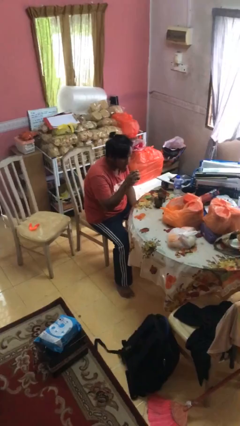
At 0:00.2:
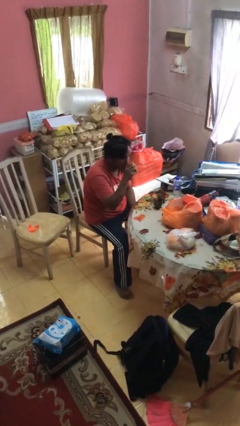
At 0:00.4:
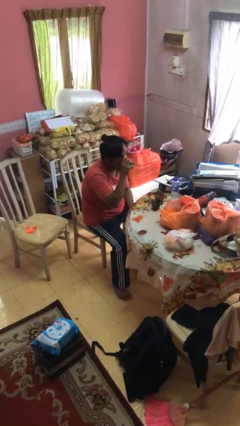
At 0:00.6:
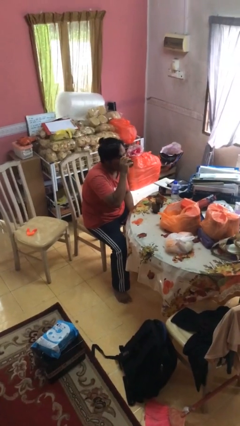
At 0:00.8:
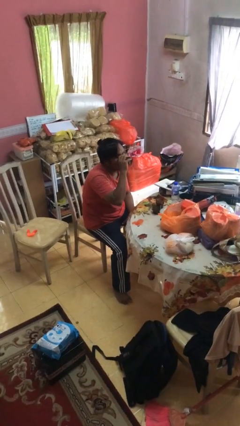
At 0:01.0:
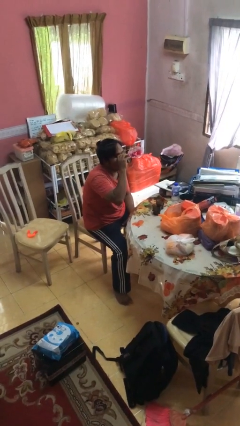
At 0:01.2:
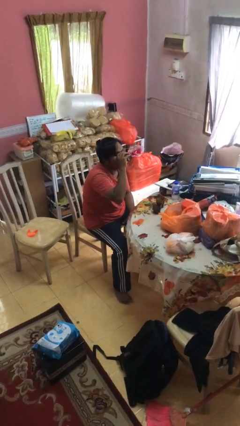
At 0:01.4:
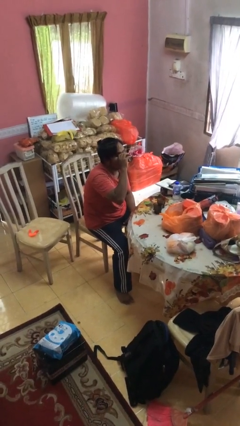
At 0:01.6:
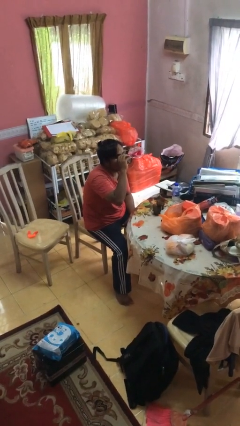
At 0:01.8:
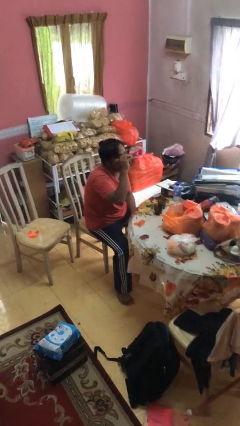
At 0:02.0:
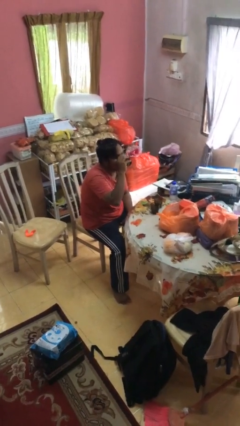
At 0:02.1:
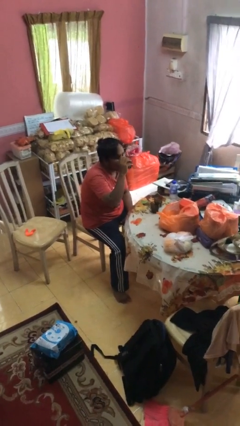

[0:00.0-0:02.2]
person drinks from shotglass

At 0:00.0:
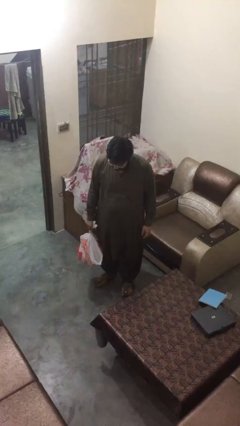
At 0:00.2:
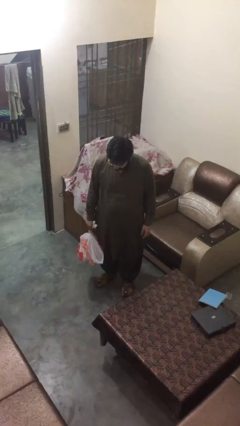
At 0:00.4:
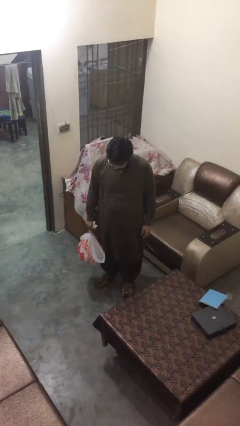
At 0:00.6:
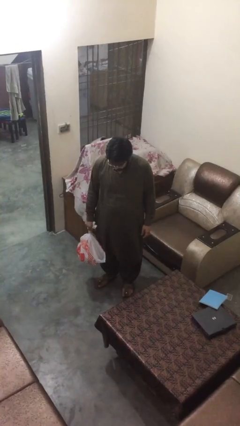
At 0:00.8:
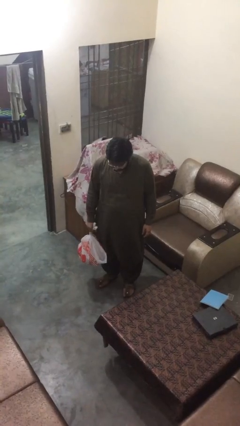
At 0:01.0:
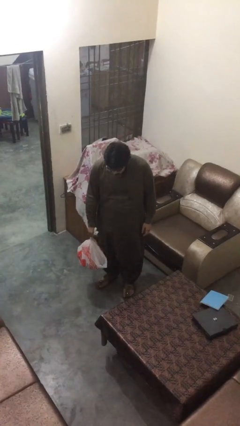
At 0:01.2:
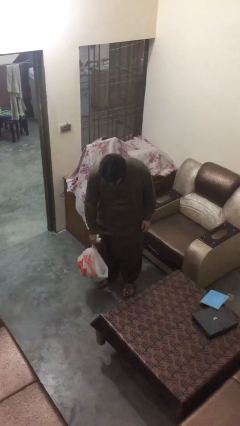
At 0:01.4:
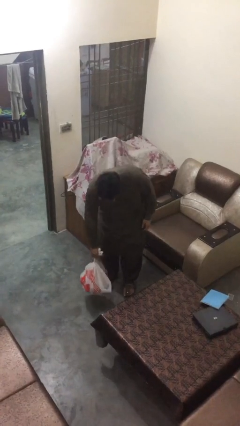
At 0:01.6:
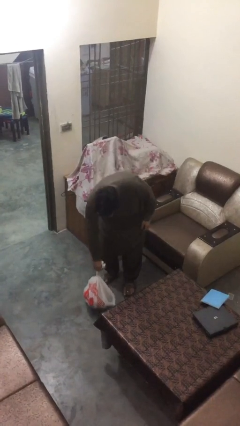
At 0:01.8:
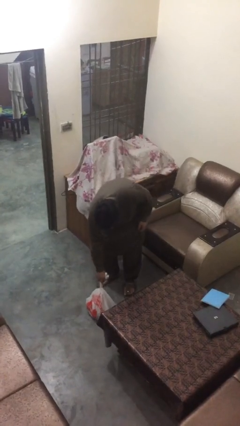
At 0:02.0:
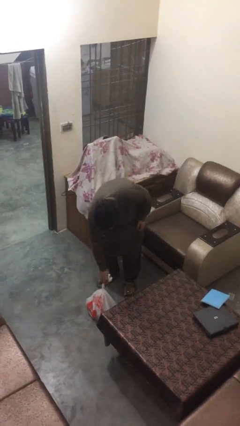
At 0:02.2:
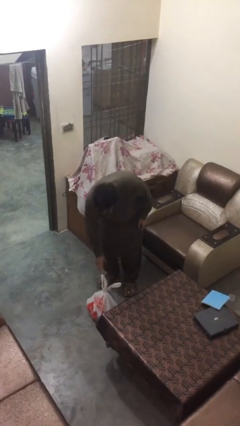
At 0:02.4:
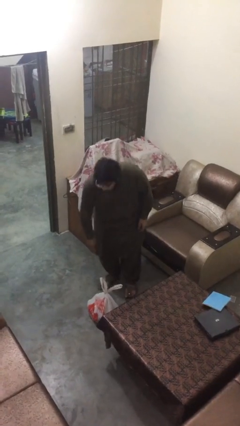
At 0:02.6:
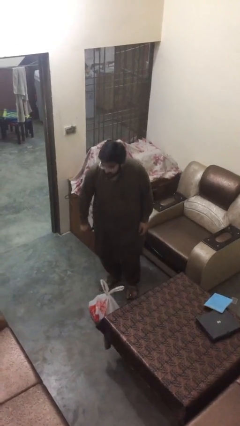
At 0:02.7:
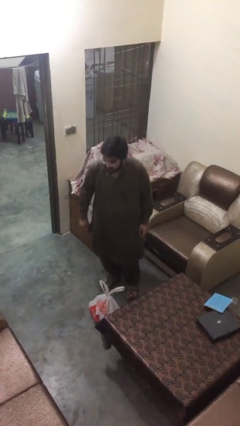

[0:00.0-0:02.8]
person puts down object on floor

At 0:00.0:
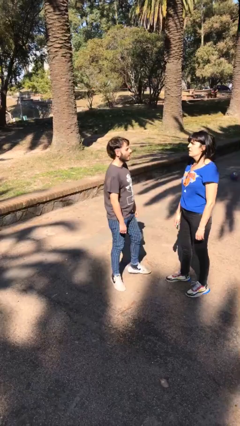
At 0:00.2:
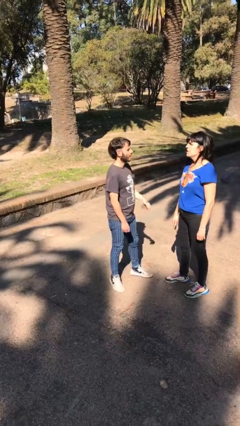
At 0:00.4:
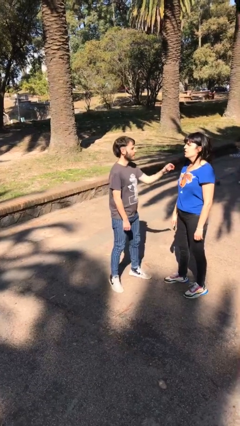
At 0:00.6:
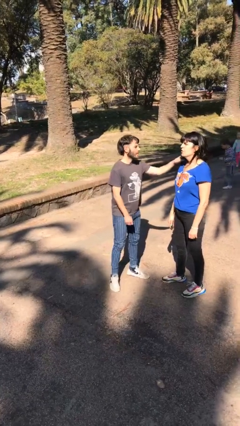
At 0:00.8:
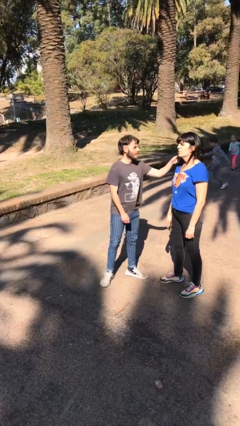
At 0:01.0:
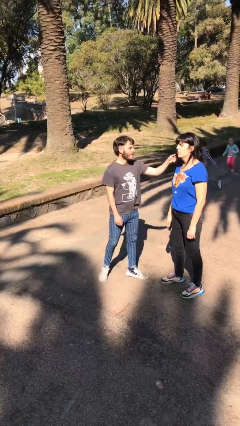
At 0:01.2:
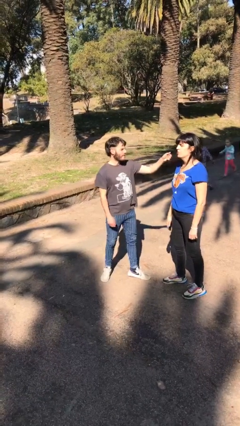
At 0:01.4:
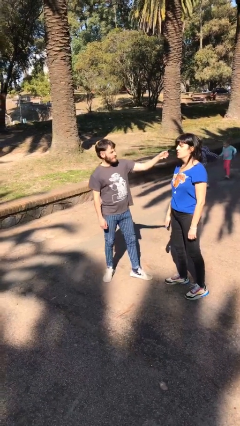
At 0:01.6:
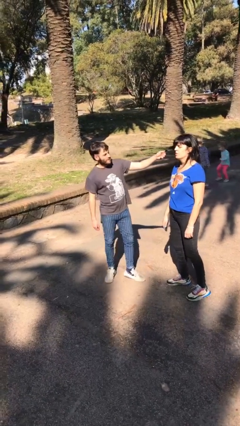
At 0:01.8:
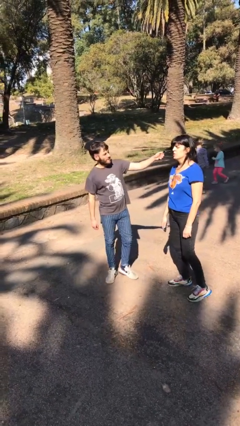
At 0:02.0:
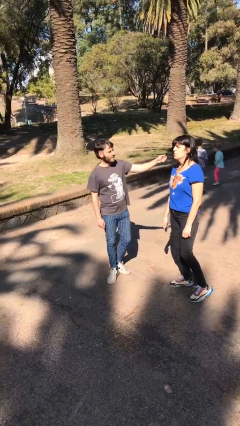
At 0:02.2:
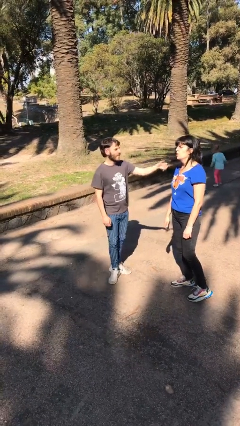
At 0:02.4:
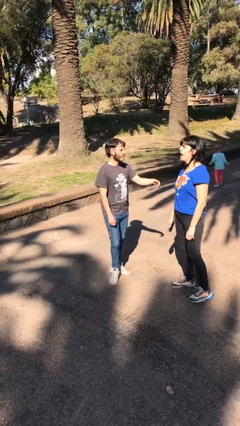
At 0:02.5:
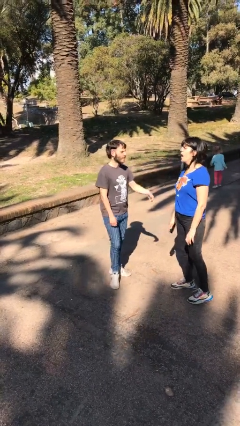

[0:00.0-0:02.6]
person grabs person by hair

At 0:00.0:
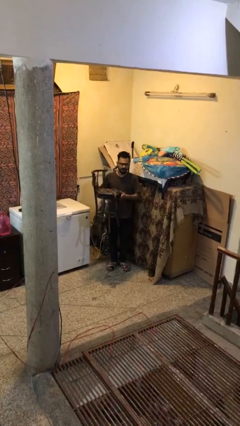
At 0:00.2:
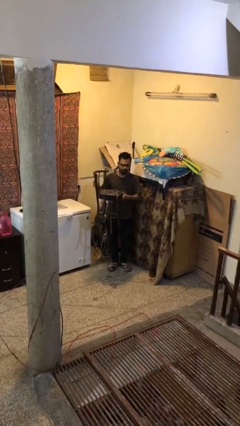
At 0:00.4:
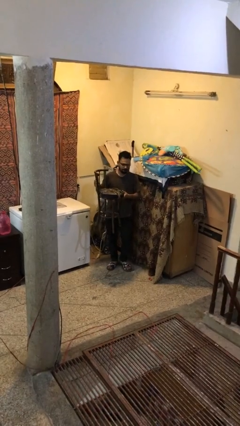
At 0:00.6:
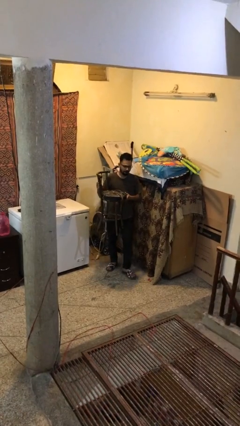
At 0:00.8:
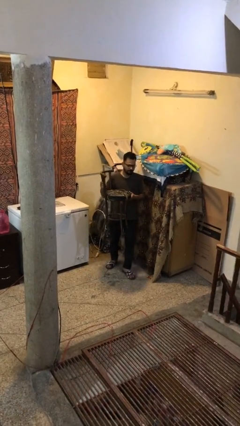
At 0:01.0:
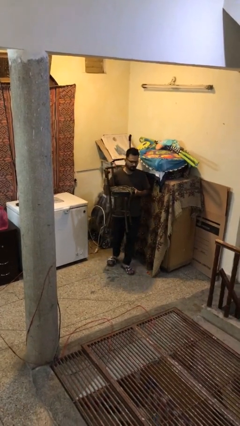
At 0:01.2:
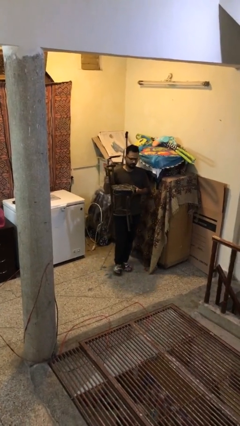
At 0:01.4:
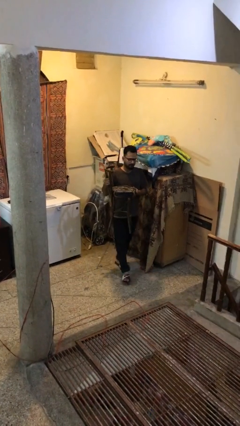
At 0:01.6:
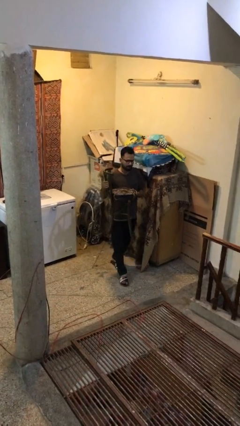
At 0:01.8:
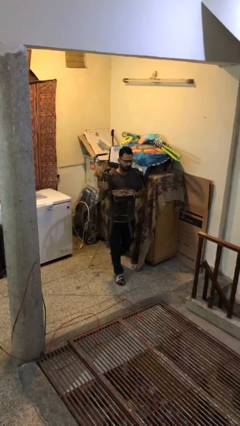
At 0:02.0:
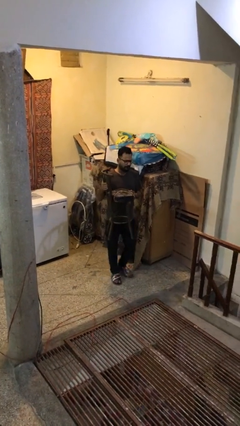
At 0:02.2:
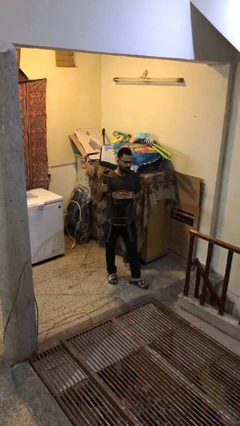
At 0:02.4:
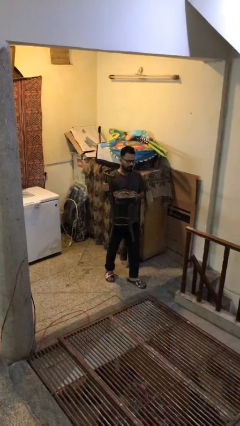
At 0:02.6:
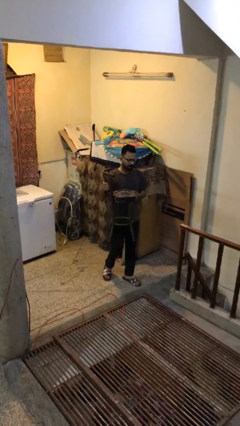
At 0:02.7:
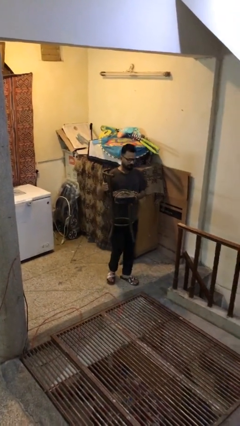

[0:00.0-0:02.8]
person carries heavy object

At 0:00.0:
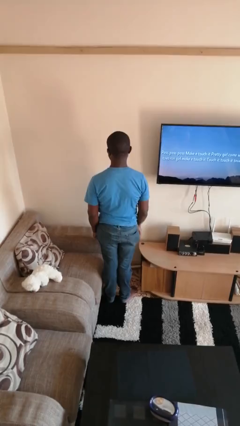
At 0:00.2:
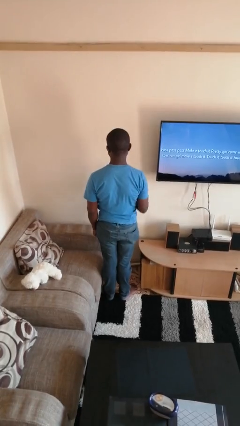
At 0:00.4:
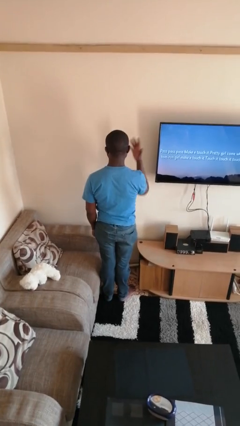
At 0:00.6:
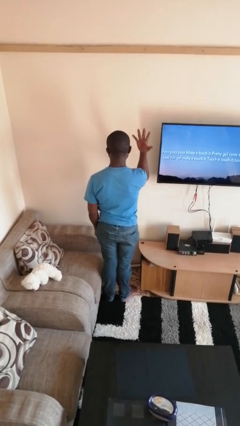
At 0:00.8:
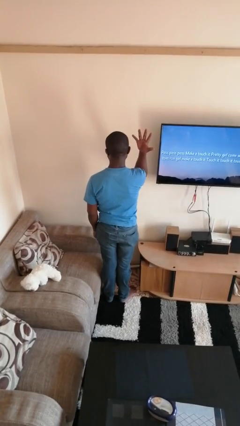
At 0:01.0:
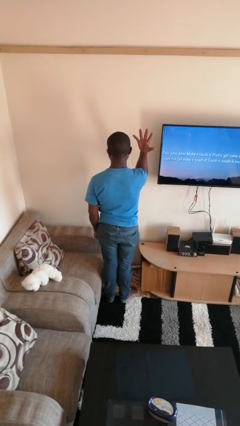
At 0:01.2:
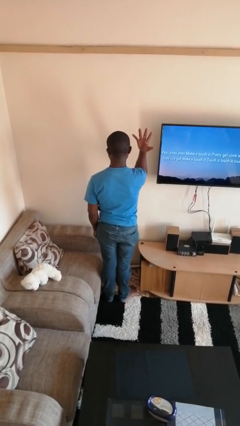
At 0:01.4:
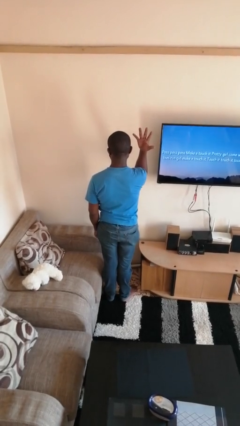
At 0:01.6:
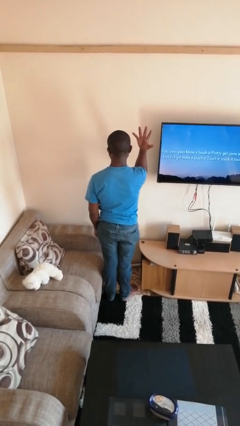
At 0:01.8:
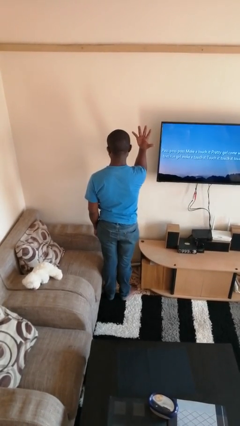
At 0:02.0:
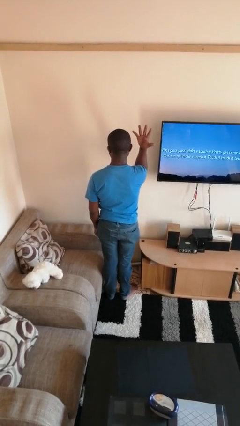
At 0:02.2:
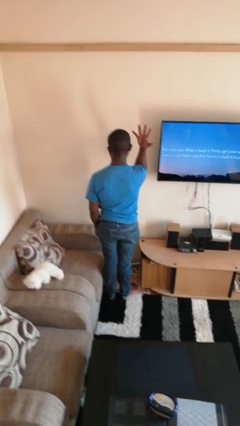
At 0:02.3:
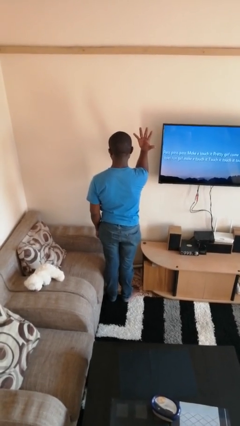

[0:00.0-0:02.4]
person gestures number five

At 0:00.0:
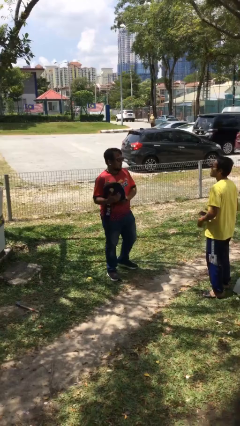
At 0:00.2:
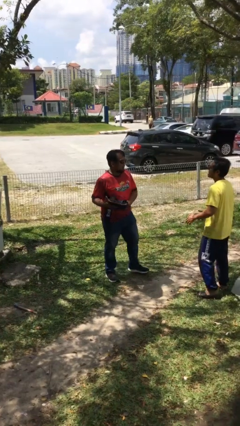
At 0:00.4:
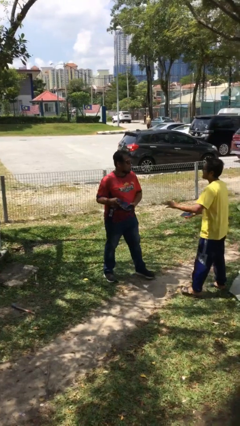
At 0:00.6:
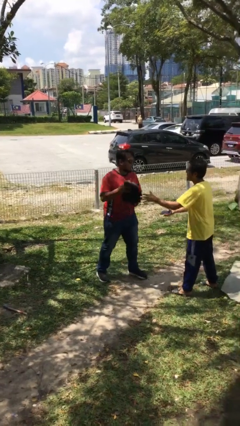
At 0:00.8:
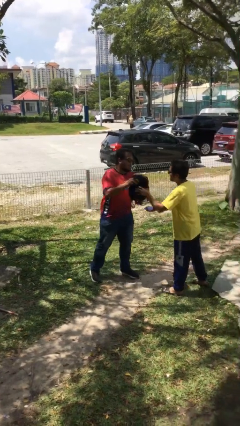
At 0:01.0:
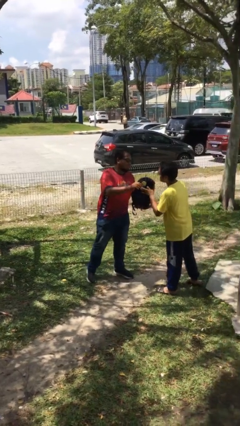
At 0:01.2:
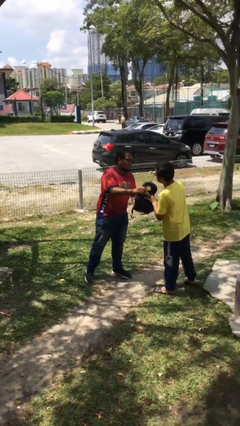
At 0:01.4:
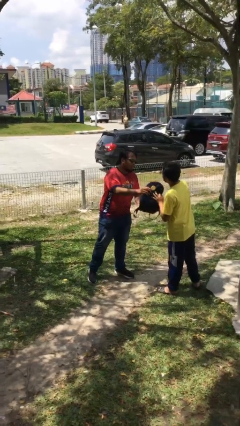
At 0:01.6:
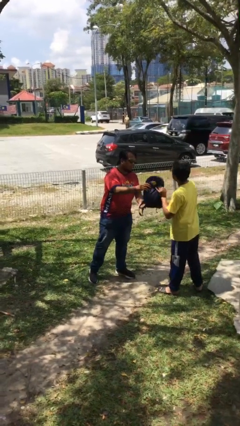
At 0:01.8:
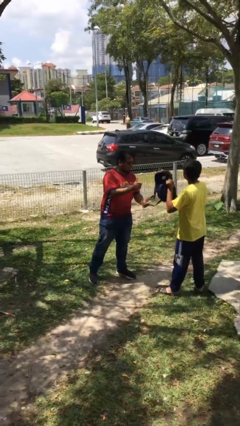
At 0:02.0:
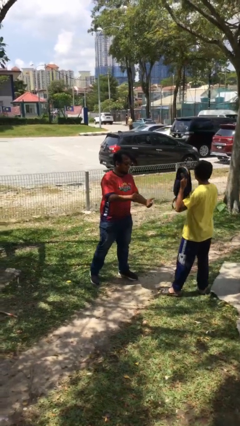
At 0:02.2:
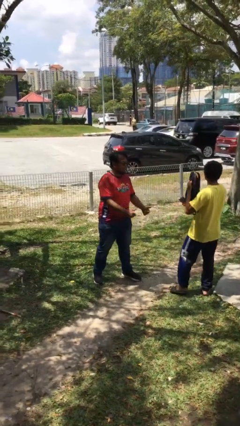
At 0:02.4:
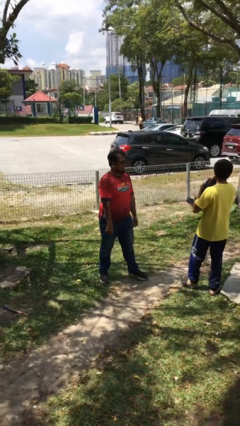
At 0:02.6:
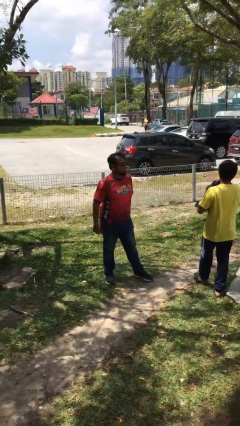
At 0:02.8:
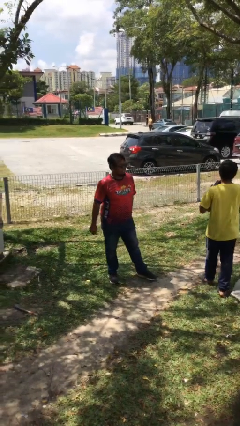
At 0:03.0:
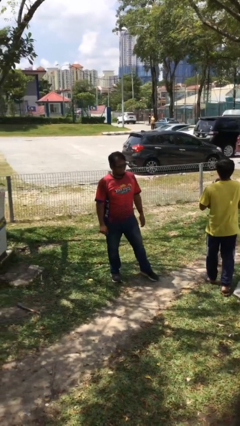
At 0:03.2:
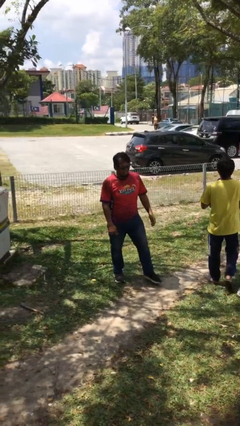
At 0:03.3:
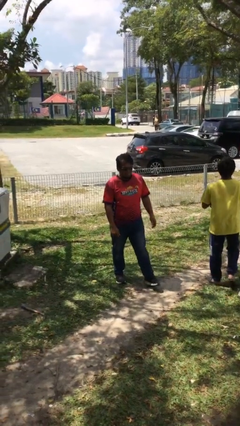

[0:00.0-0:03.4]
person transfers object to person

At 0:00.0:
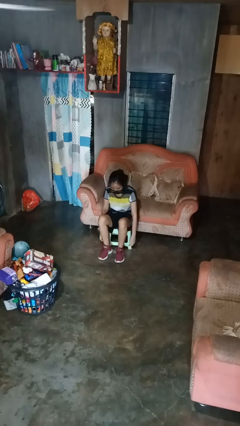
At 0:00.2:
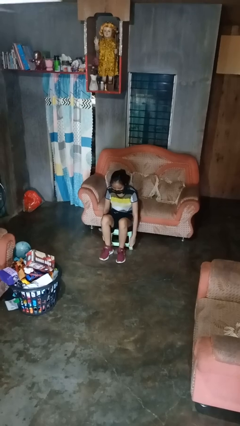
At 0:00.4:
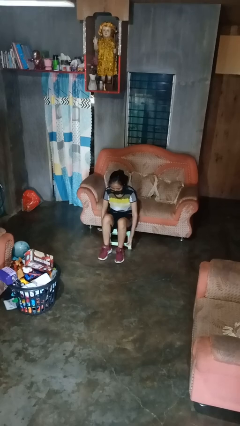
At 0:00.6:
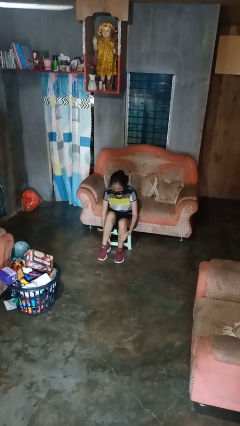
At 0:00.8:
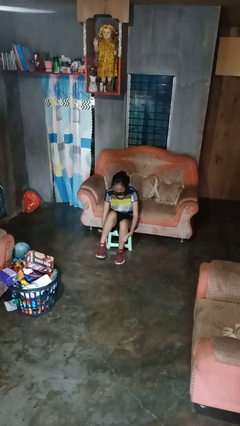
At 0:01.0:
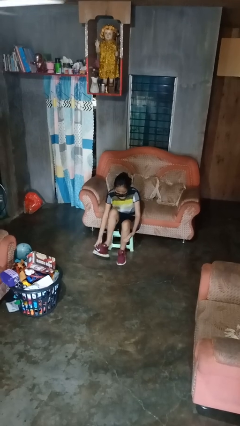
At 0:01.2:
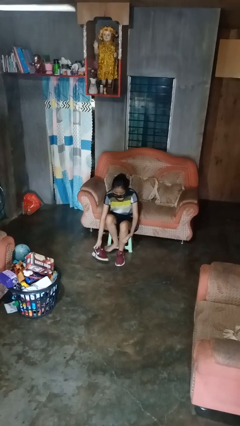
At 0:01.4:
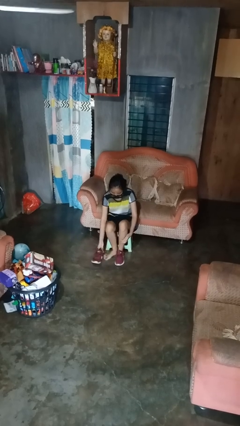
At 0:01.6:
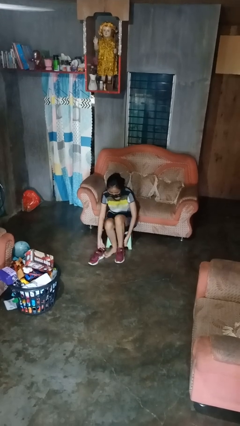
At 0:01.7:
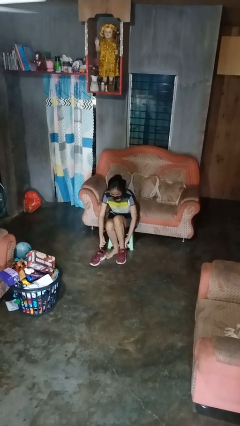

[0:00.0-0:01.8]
person takes off shoes
